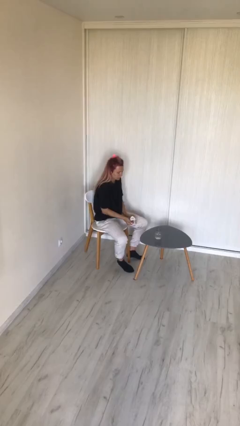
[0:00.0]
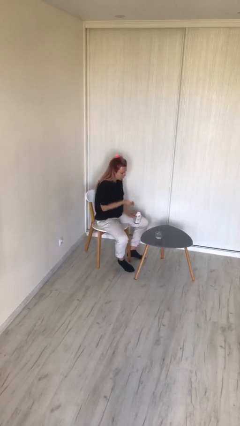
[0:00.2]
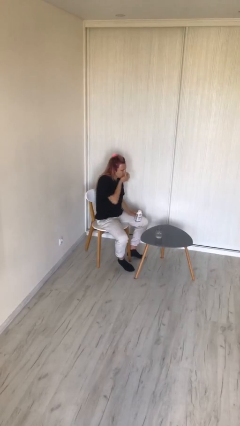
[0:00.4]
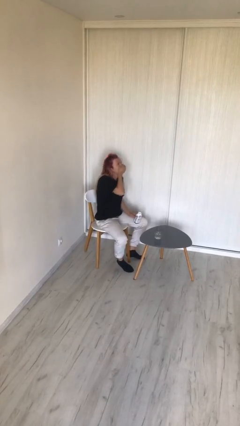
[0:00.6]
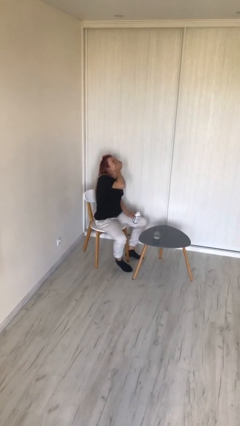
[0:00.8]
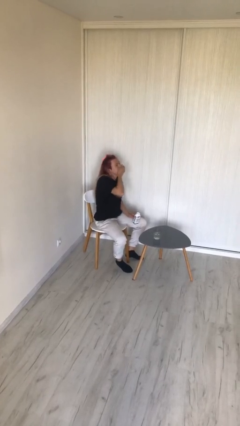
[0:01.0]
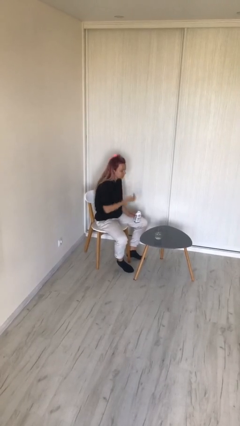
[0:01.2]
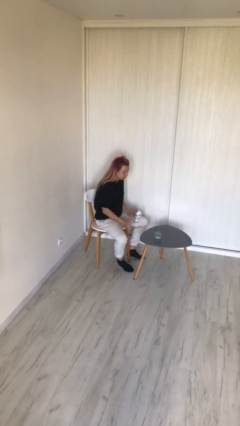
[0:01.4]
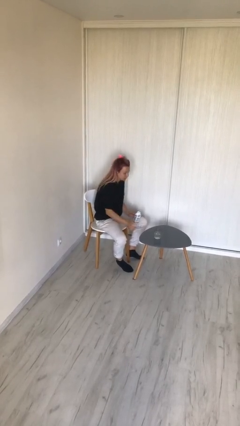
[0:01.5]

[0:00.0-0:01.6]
person takes medicine pills

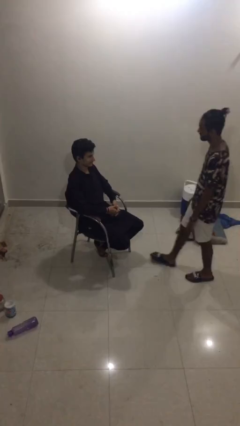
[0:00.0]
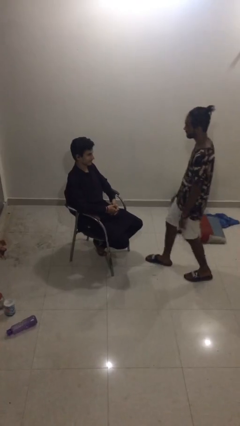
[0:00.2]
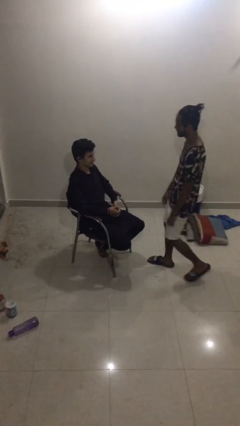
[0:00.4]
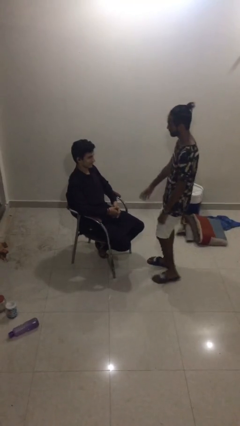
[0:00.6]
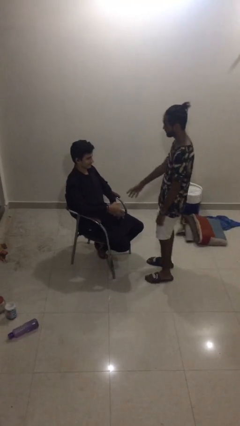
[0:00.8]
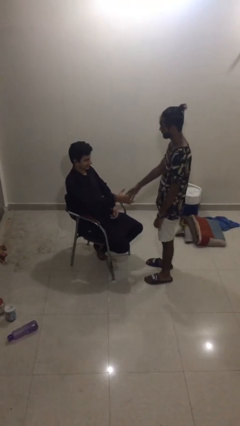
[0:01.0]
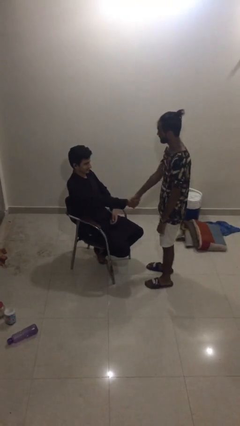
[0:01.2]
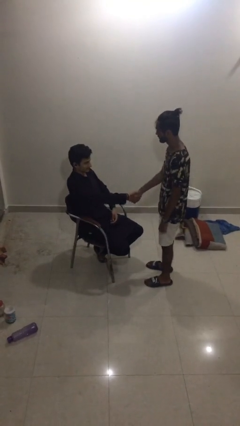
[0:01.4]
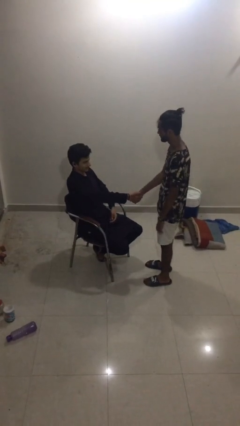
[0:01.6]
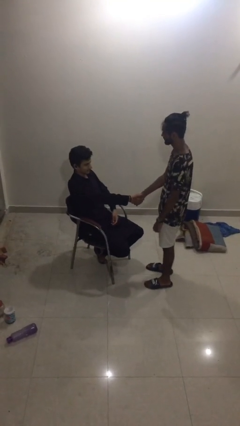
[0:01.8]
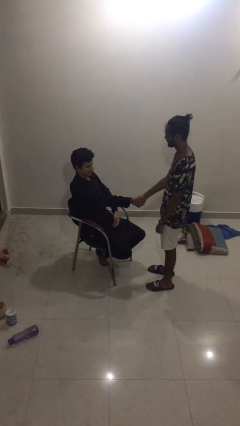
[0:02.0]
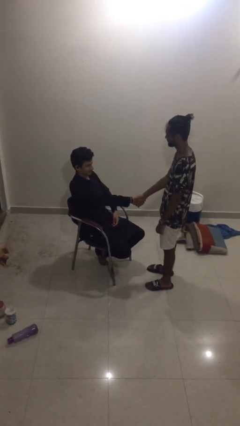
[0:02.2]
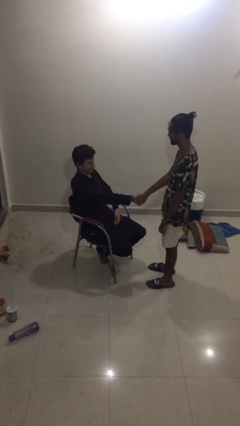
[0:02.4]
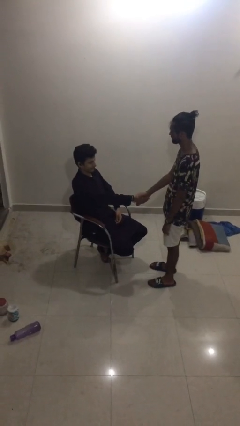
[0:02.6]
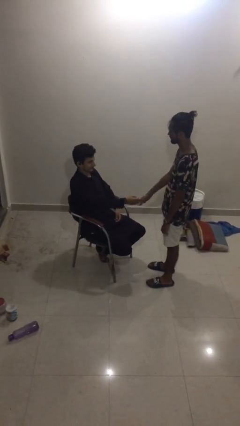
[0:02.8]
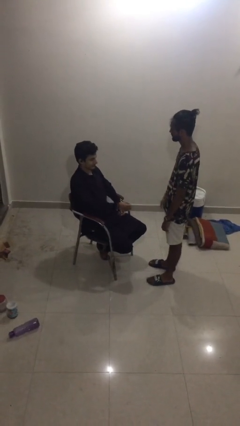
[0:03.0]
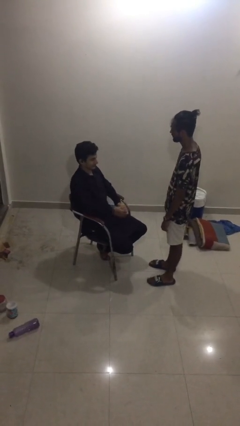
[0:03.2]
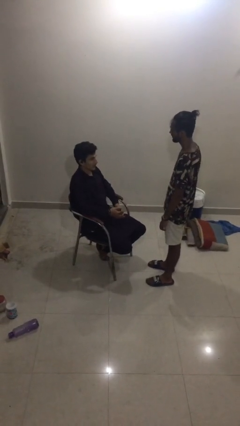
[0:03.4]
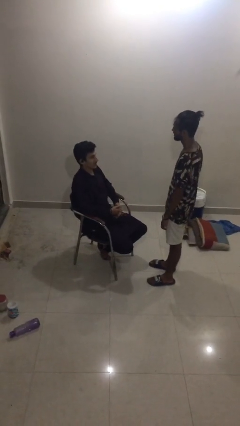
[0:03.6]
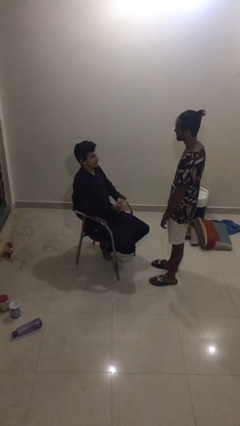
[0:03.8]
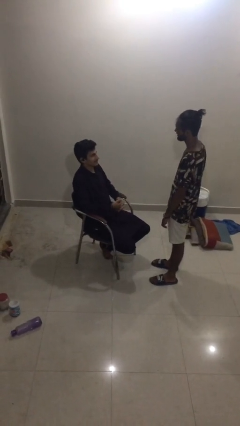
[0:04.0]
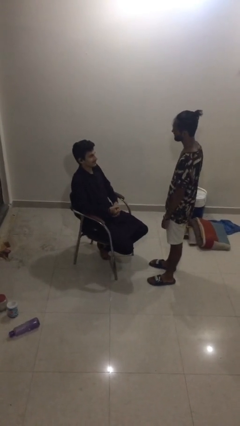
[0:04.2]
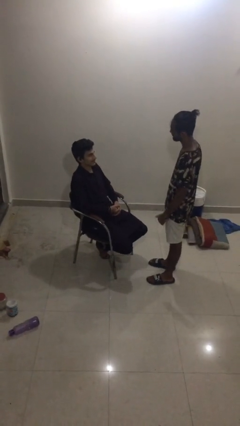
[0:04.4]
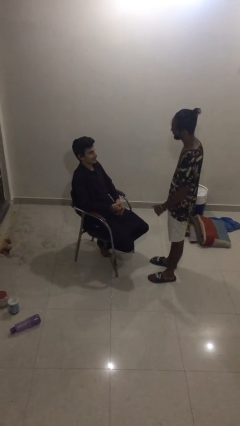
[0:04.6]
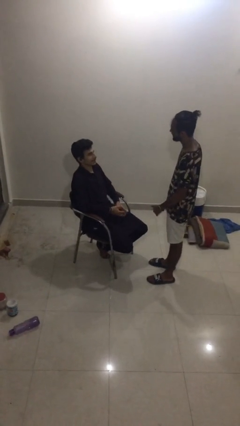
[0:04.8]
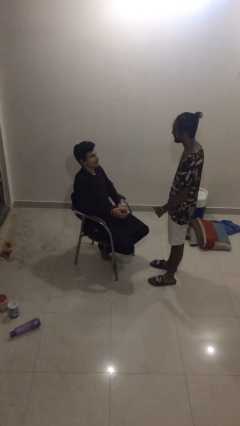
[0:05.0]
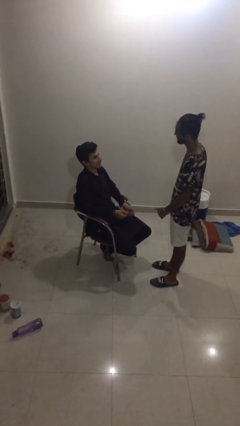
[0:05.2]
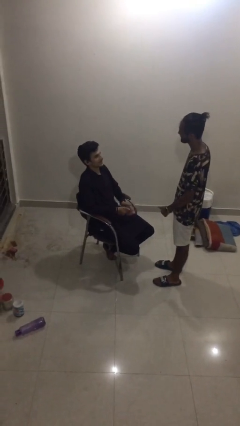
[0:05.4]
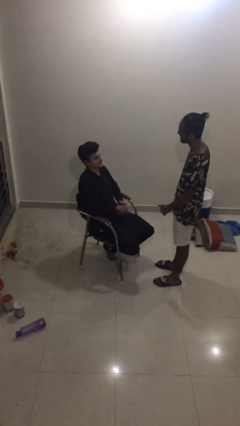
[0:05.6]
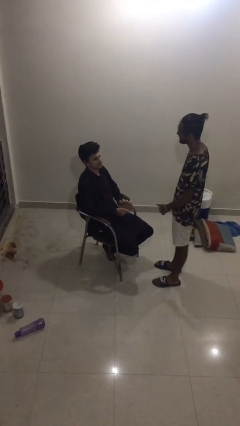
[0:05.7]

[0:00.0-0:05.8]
person shakes hand

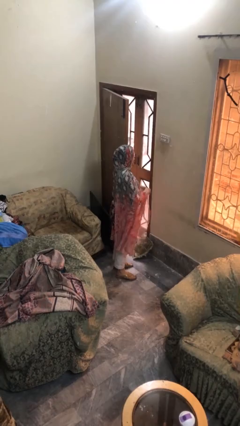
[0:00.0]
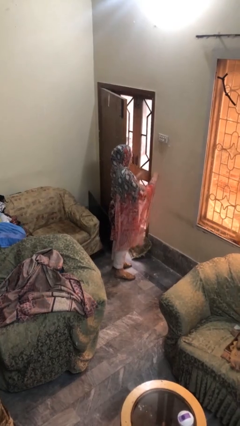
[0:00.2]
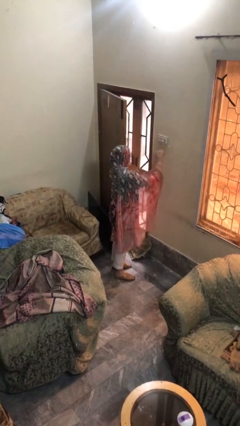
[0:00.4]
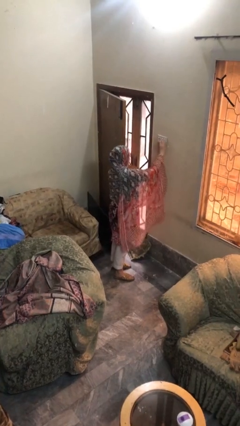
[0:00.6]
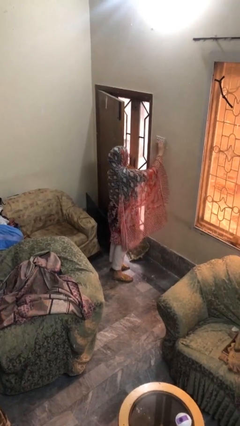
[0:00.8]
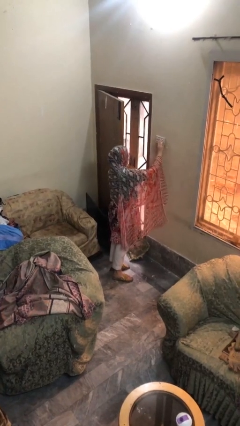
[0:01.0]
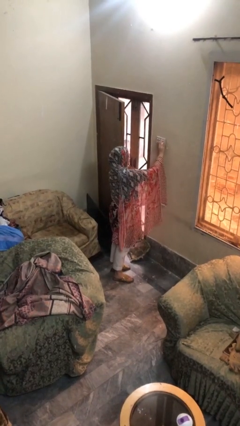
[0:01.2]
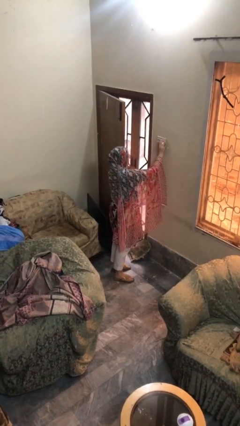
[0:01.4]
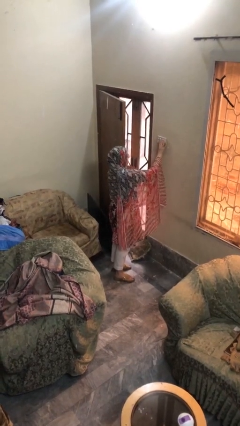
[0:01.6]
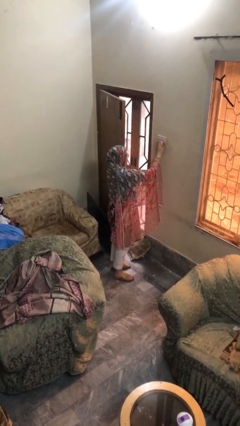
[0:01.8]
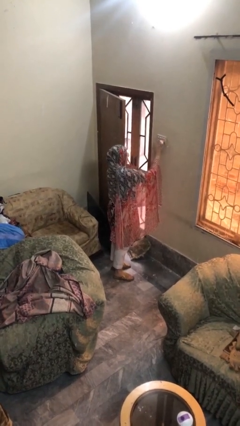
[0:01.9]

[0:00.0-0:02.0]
person plugs into electrical socket

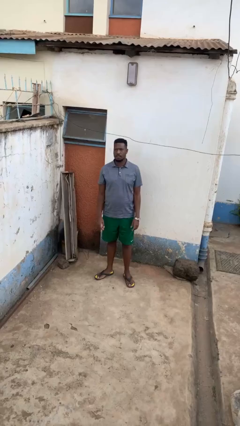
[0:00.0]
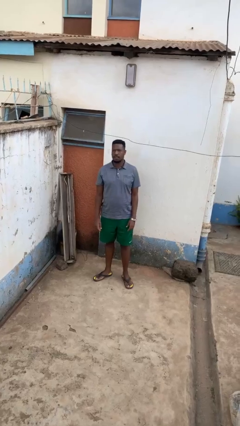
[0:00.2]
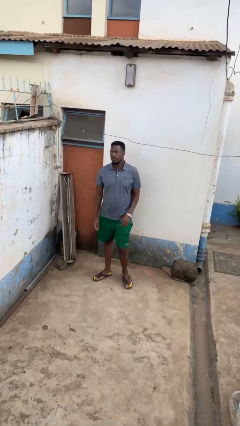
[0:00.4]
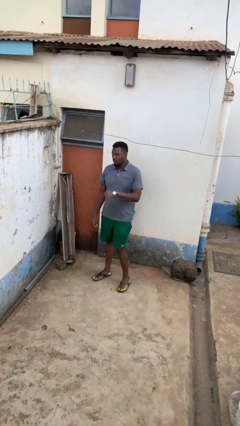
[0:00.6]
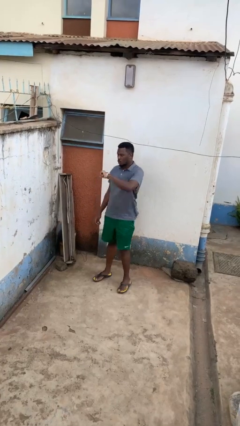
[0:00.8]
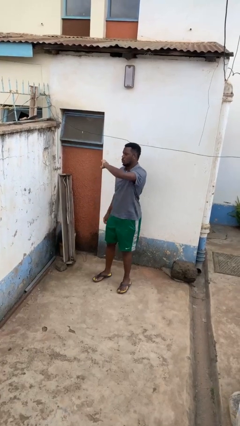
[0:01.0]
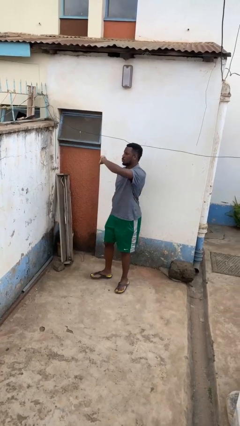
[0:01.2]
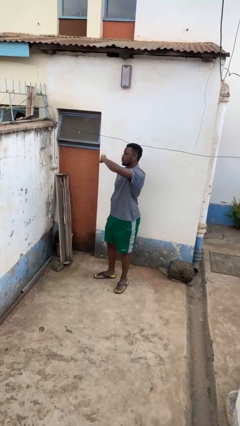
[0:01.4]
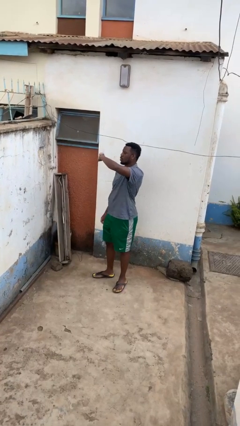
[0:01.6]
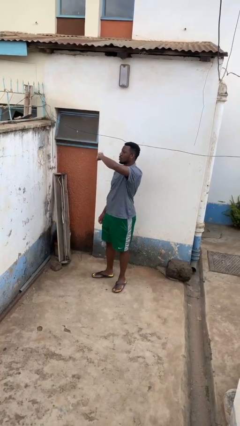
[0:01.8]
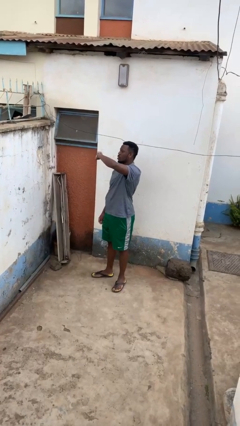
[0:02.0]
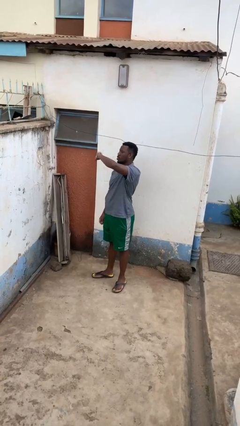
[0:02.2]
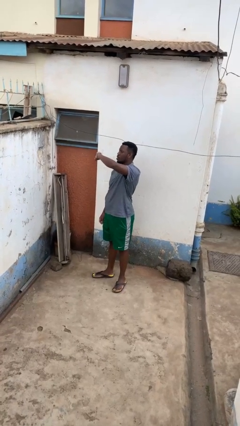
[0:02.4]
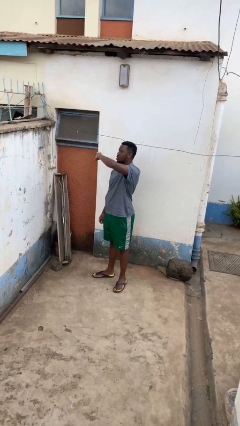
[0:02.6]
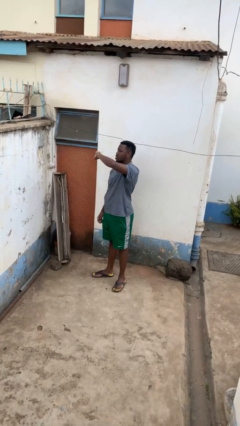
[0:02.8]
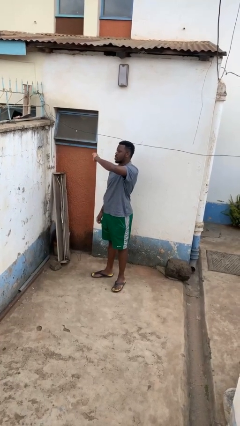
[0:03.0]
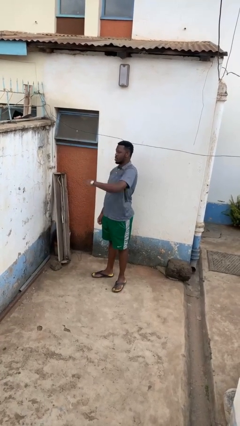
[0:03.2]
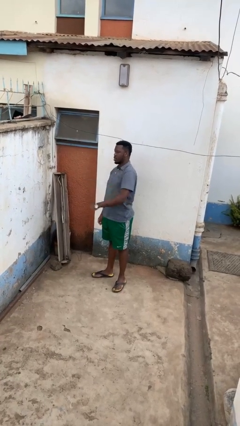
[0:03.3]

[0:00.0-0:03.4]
person looks at wristwatch

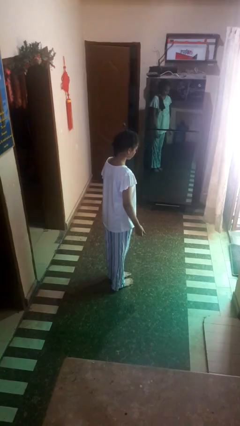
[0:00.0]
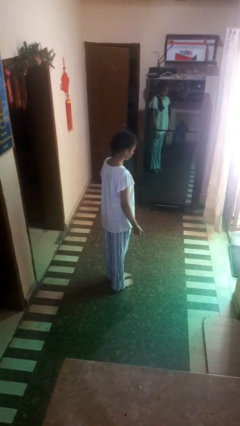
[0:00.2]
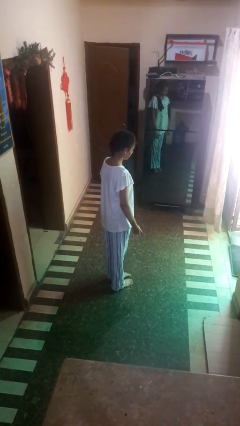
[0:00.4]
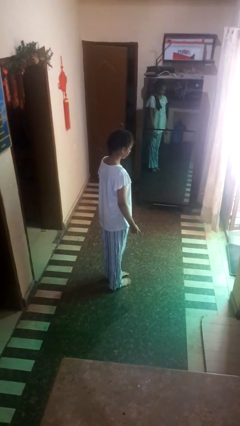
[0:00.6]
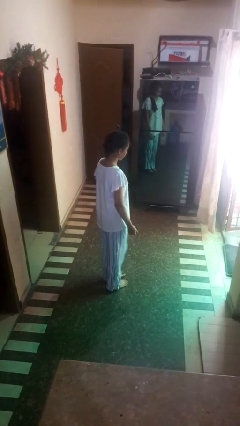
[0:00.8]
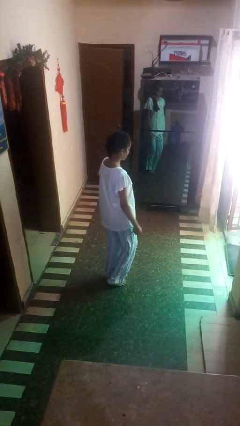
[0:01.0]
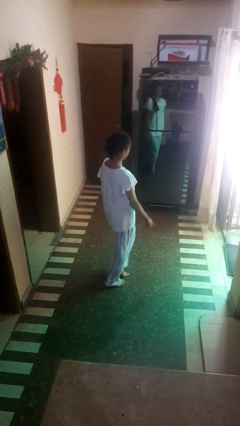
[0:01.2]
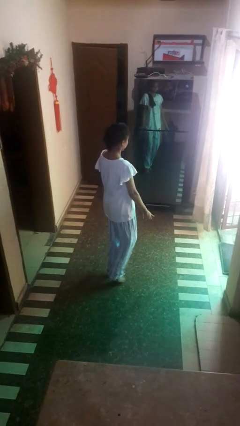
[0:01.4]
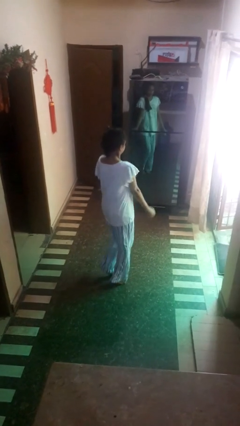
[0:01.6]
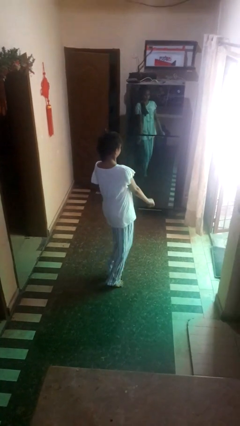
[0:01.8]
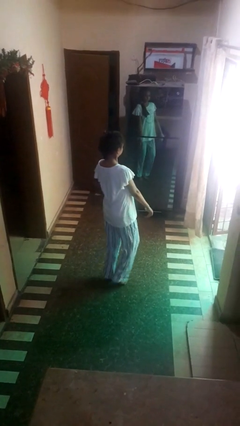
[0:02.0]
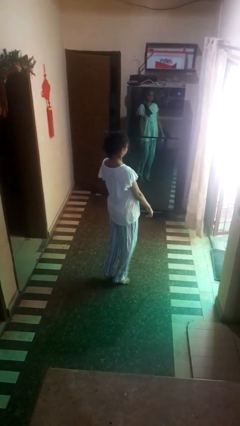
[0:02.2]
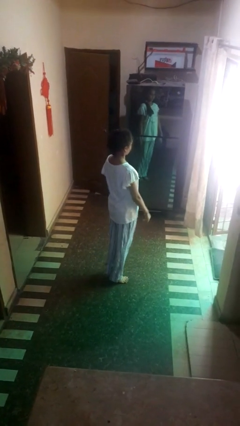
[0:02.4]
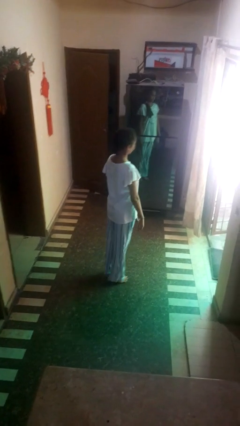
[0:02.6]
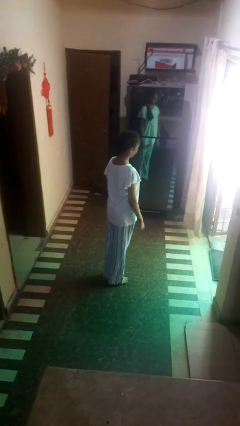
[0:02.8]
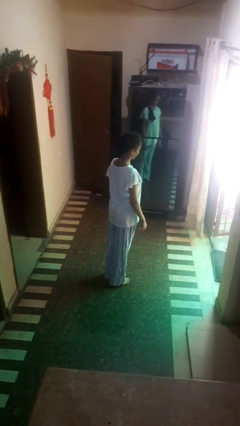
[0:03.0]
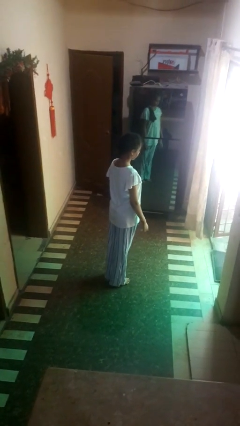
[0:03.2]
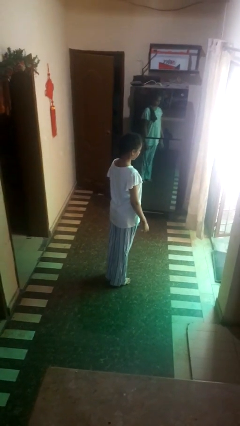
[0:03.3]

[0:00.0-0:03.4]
person walks tiptoe

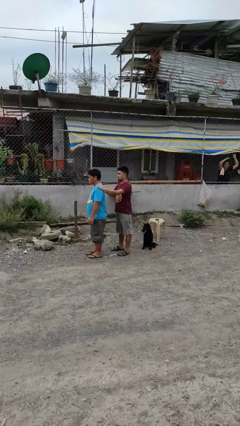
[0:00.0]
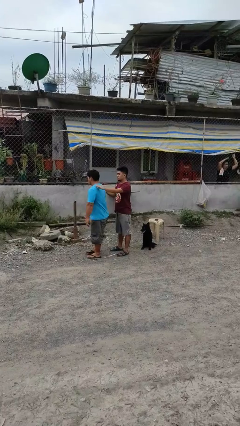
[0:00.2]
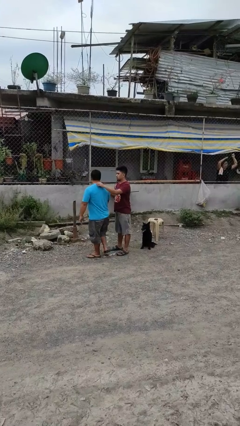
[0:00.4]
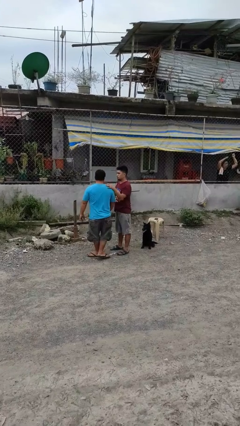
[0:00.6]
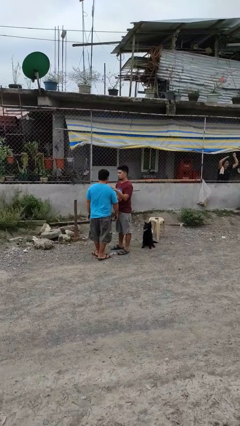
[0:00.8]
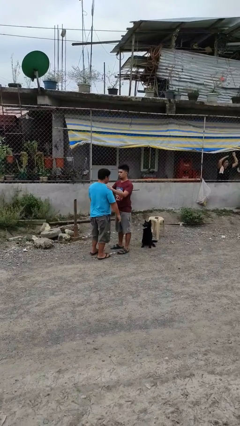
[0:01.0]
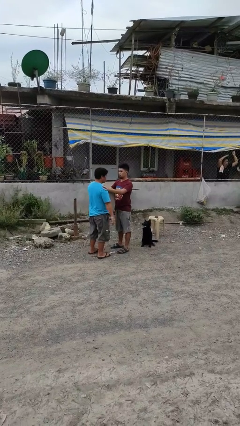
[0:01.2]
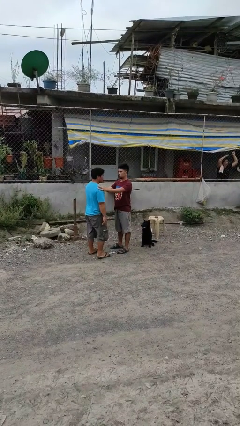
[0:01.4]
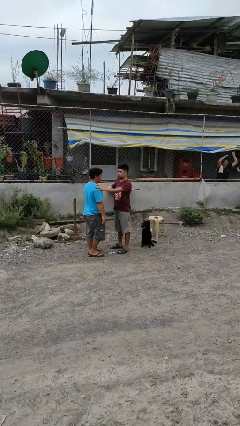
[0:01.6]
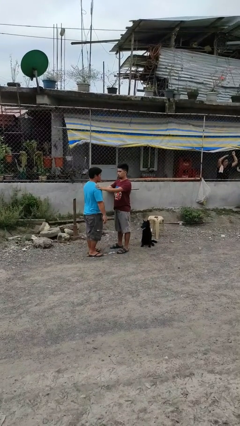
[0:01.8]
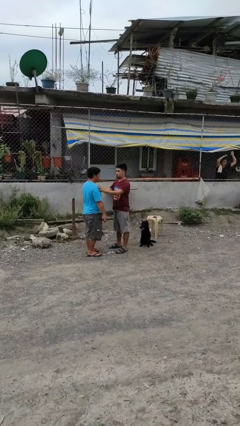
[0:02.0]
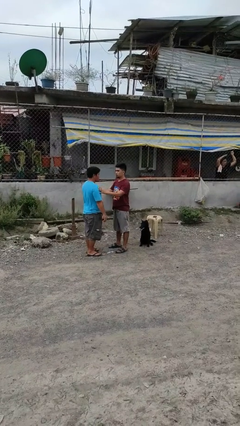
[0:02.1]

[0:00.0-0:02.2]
person spins person around
